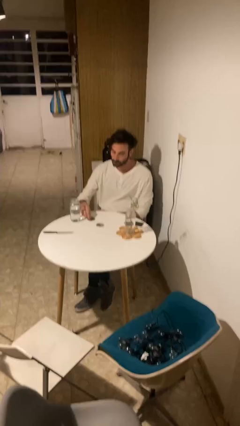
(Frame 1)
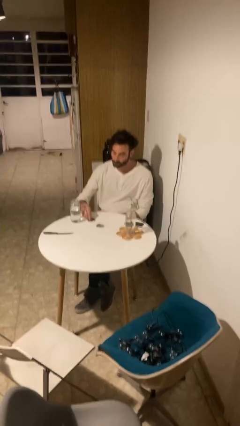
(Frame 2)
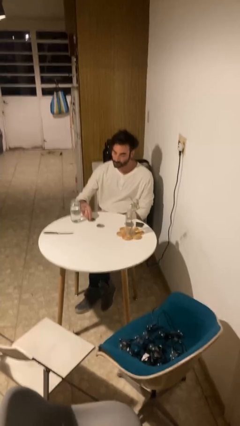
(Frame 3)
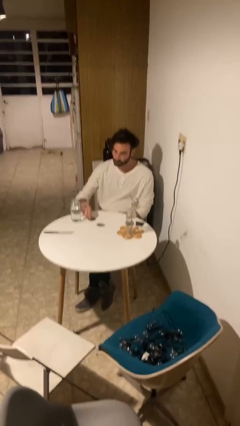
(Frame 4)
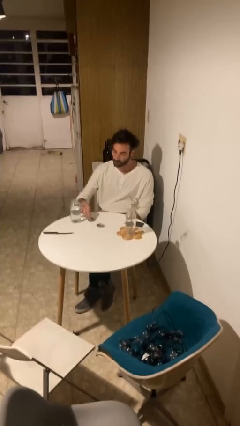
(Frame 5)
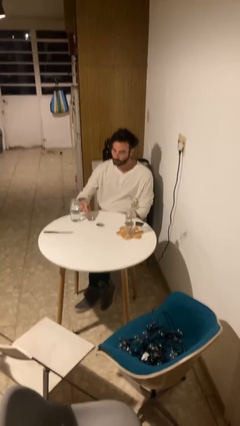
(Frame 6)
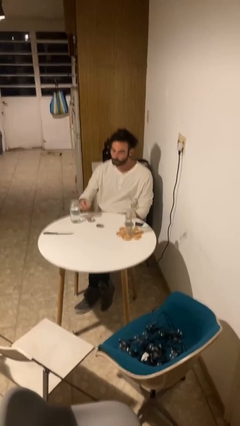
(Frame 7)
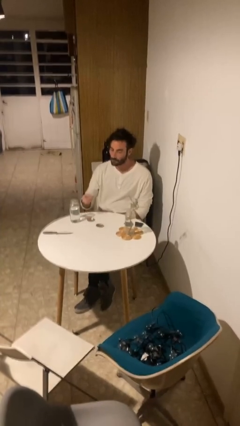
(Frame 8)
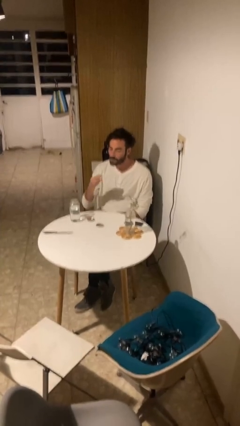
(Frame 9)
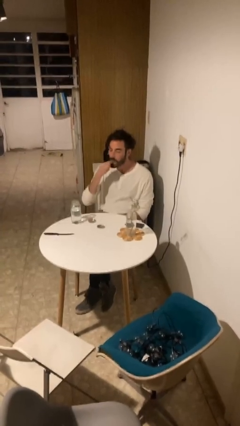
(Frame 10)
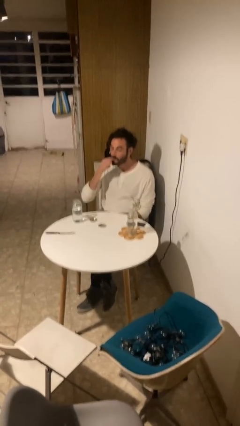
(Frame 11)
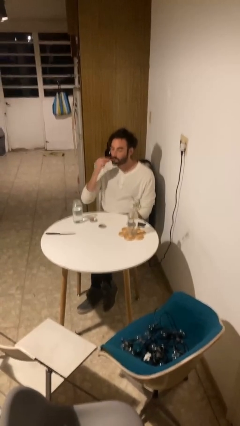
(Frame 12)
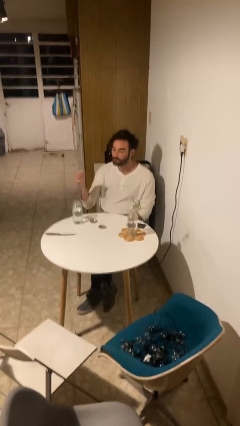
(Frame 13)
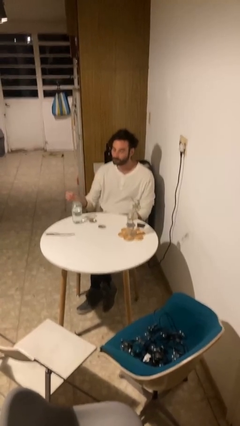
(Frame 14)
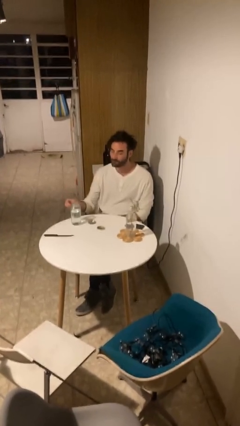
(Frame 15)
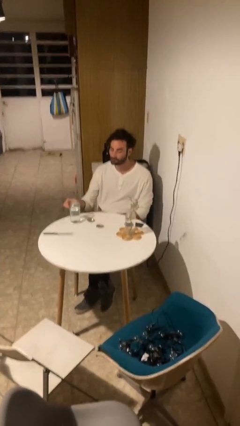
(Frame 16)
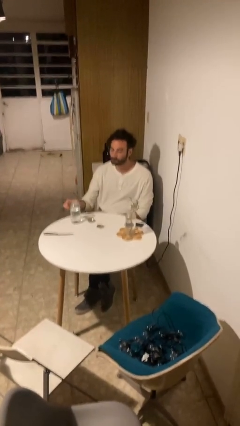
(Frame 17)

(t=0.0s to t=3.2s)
person takes medicine pills

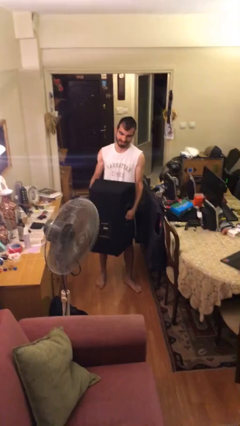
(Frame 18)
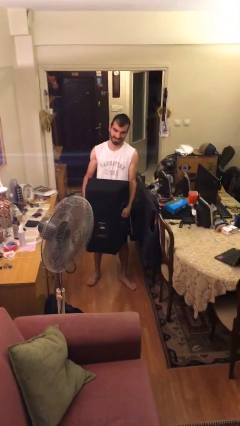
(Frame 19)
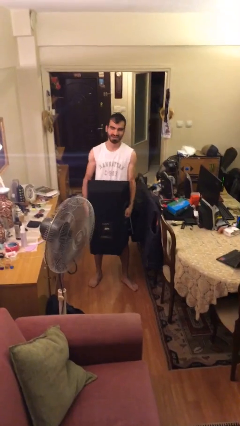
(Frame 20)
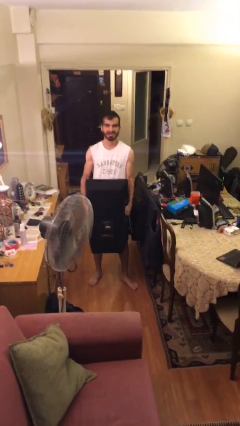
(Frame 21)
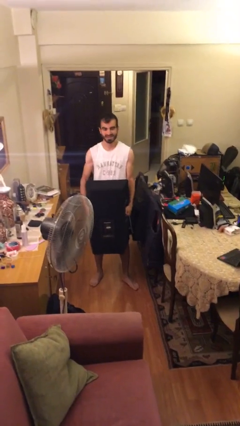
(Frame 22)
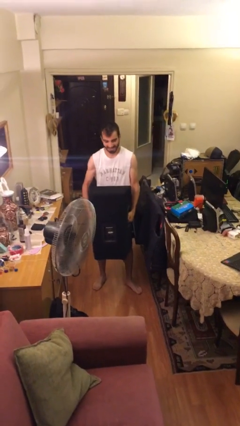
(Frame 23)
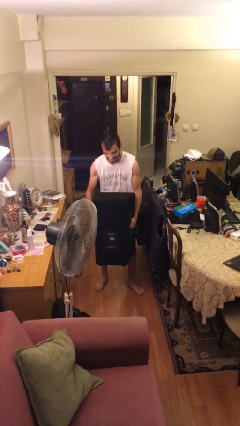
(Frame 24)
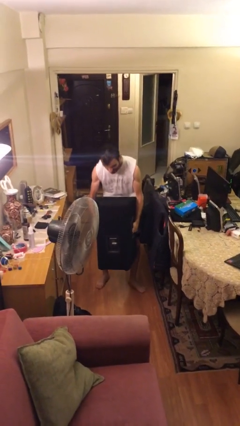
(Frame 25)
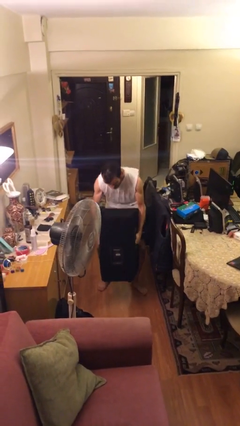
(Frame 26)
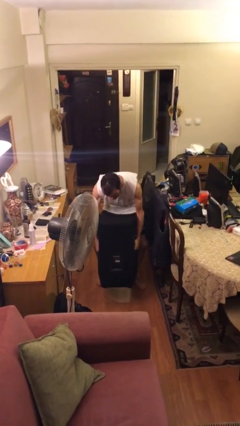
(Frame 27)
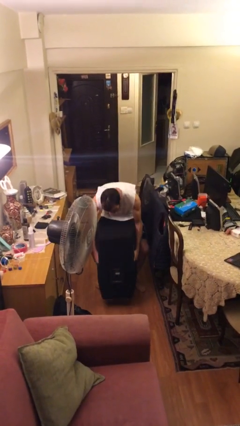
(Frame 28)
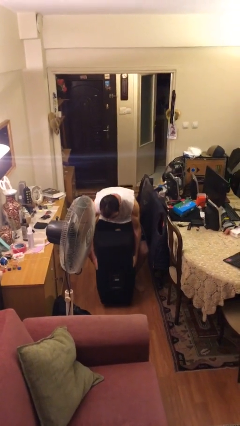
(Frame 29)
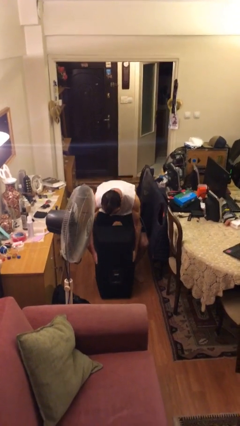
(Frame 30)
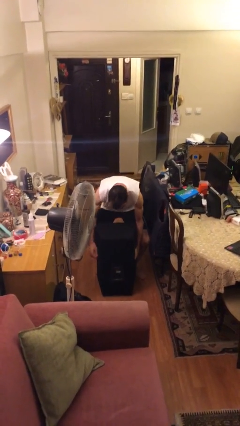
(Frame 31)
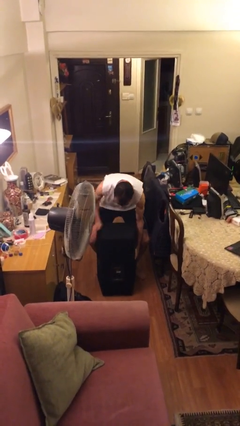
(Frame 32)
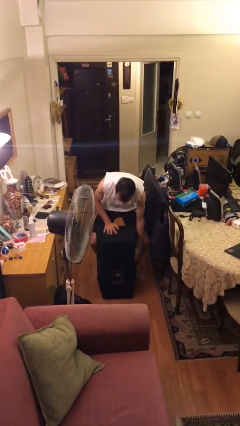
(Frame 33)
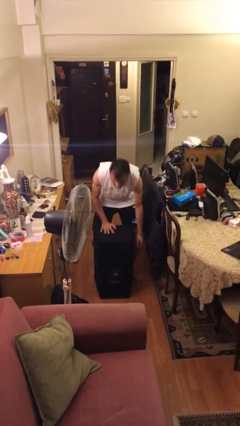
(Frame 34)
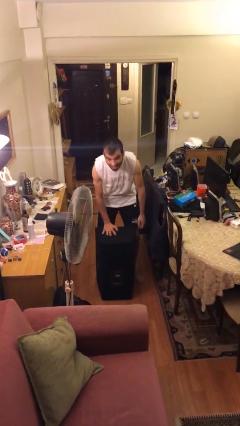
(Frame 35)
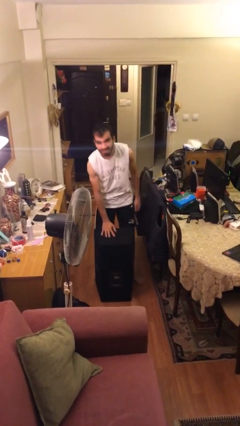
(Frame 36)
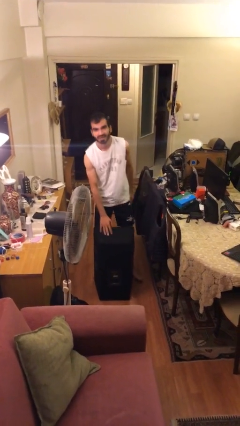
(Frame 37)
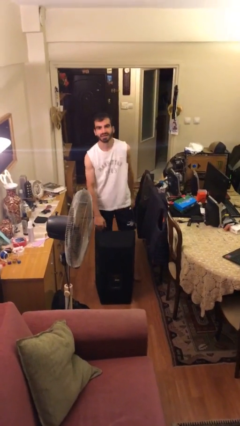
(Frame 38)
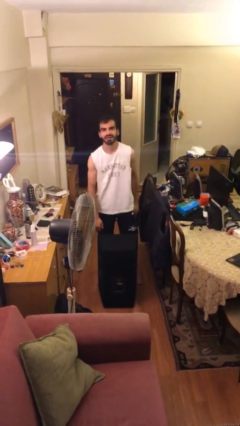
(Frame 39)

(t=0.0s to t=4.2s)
person puts down object on floor

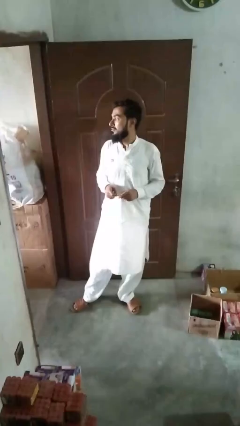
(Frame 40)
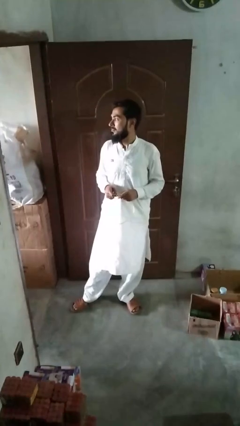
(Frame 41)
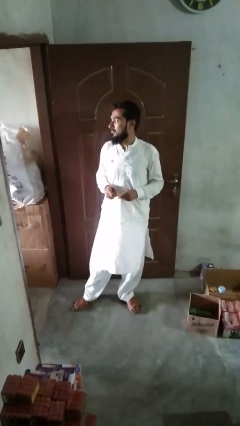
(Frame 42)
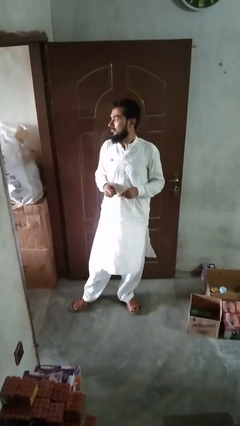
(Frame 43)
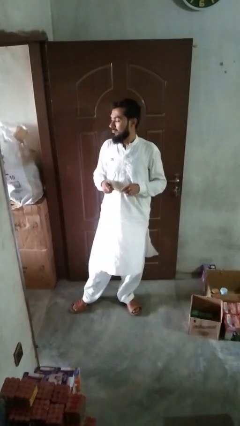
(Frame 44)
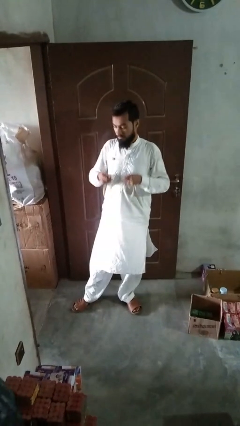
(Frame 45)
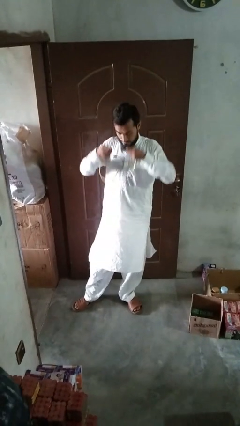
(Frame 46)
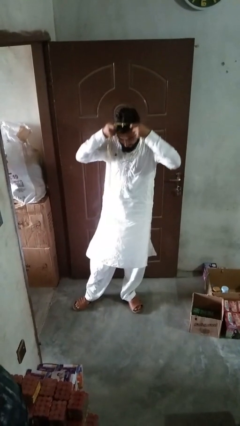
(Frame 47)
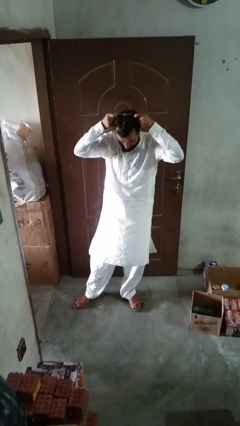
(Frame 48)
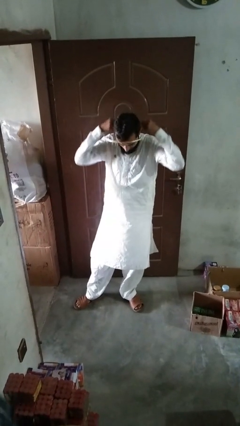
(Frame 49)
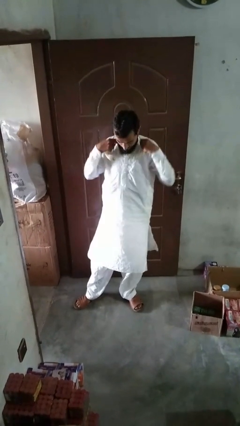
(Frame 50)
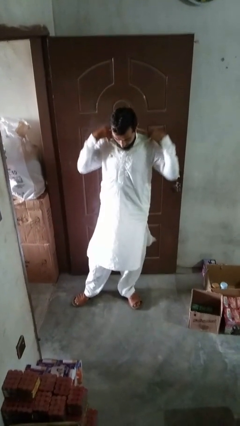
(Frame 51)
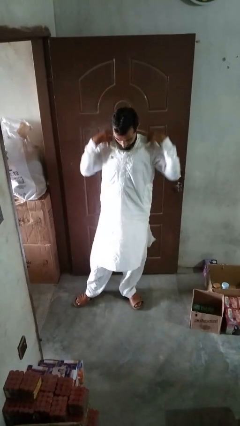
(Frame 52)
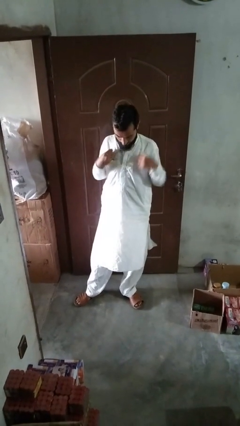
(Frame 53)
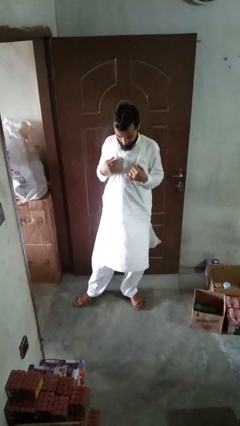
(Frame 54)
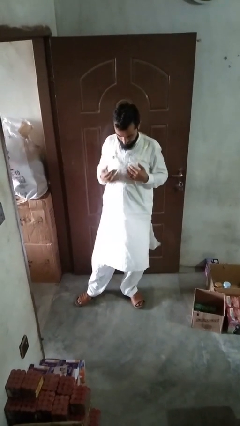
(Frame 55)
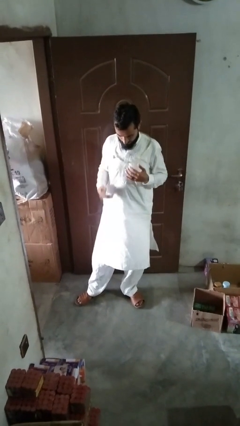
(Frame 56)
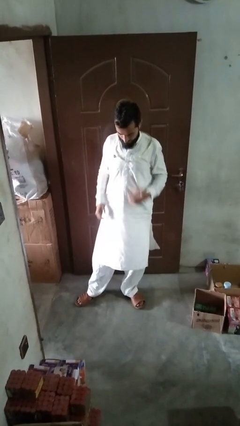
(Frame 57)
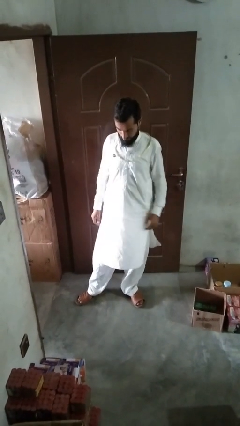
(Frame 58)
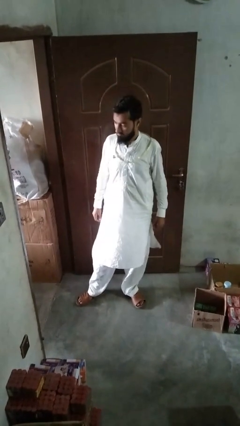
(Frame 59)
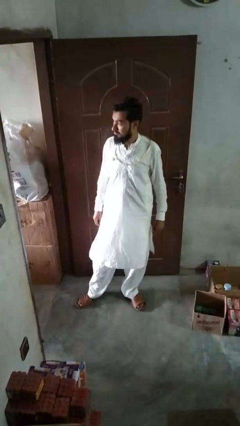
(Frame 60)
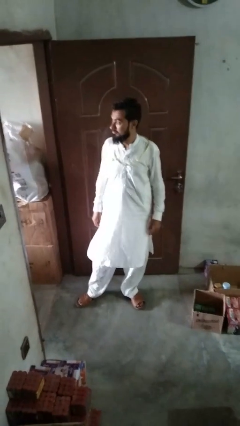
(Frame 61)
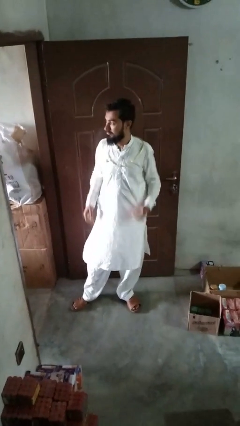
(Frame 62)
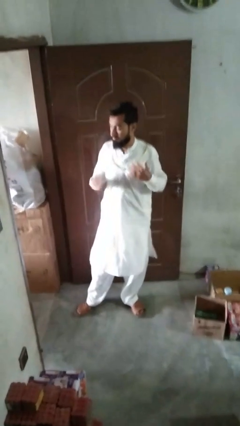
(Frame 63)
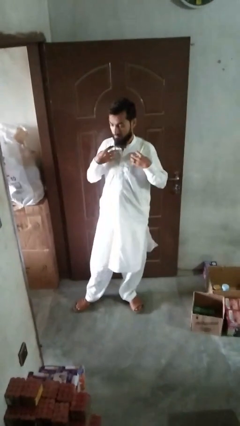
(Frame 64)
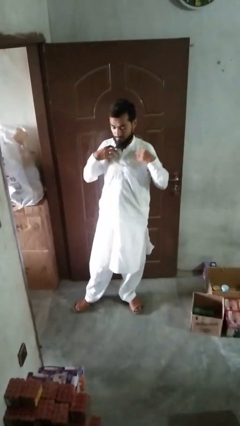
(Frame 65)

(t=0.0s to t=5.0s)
person puts on necklace

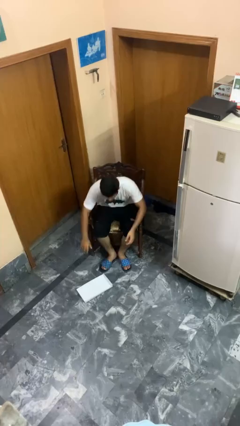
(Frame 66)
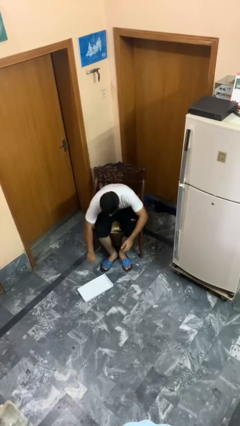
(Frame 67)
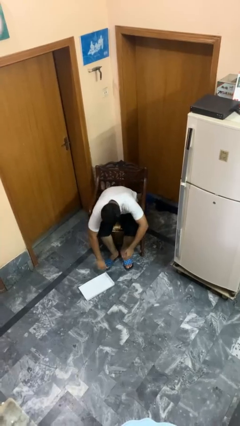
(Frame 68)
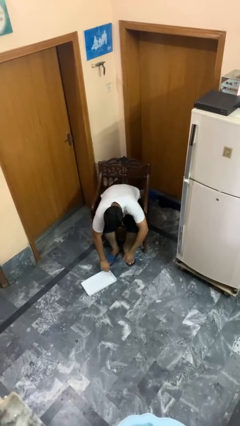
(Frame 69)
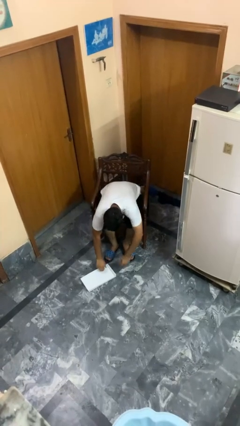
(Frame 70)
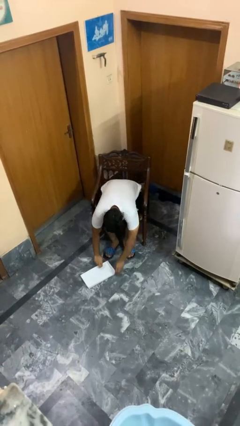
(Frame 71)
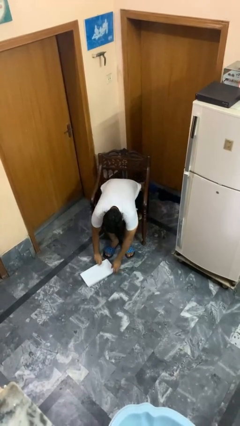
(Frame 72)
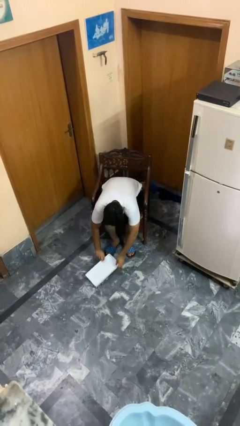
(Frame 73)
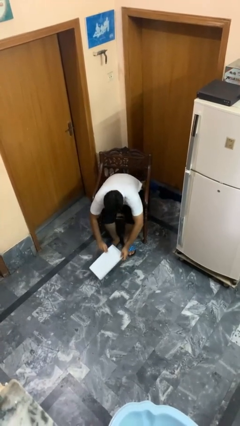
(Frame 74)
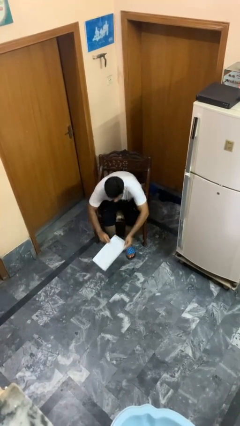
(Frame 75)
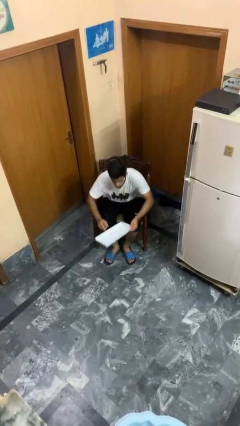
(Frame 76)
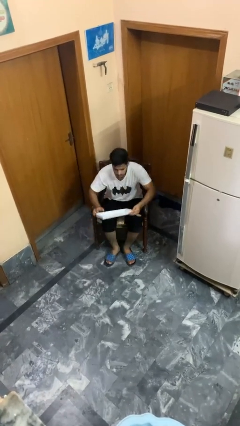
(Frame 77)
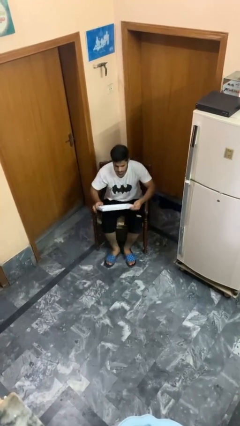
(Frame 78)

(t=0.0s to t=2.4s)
person picks up object from floor

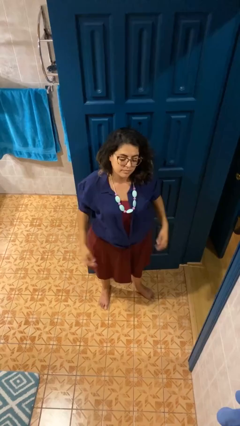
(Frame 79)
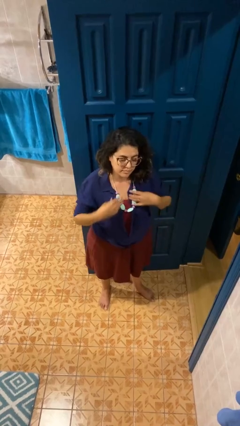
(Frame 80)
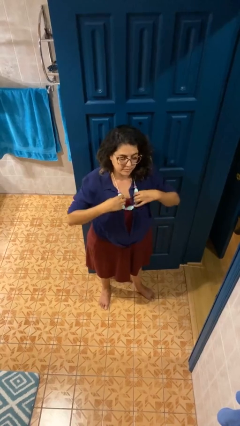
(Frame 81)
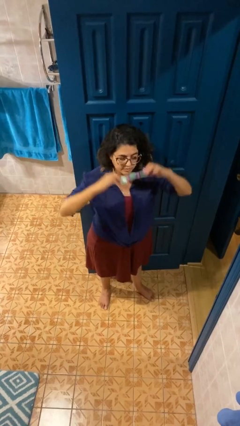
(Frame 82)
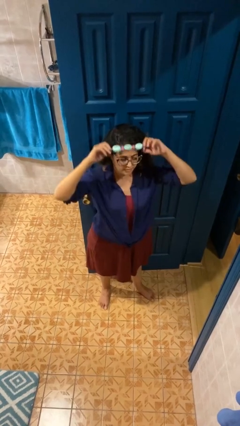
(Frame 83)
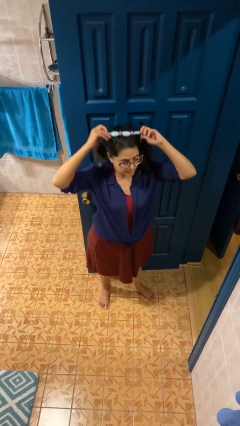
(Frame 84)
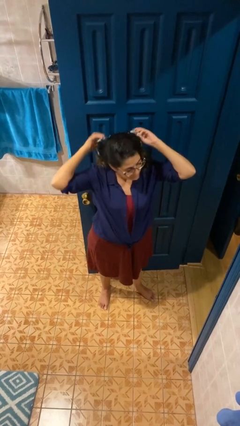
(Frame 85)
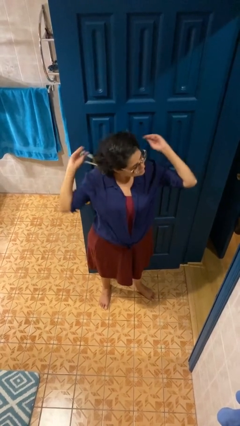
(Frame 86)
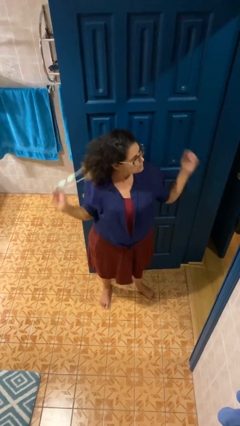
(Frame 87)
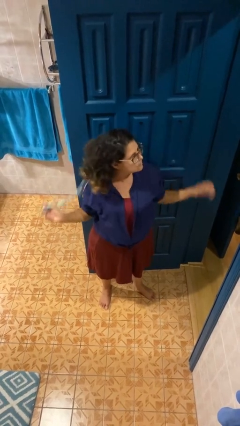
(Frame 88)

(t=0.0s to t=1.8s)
person takes off necklace

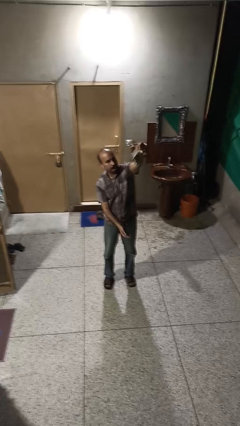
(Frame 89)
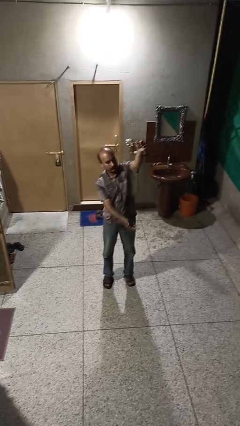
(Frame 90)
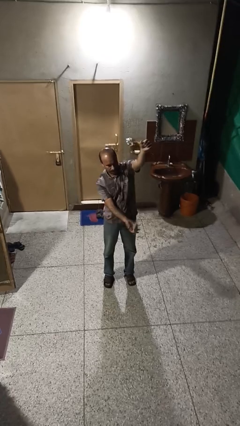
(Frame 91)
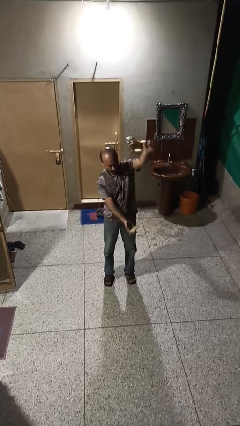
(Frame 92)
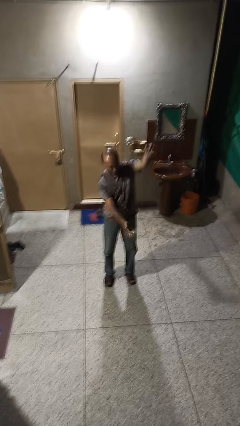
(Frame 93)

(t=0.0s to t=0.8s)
person drops object
